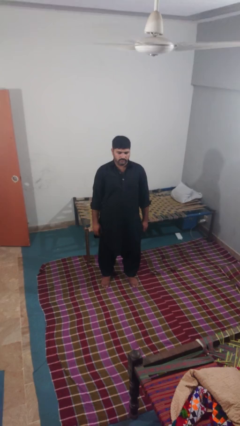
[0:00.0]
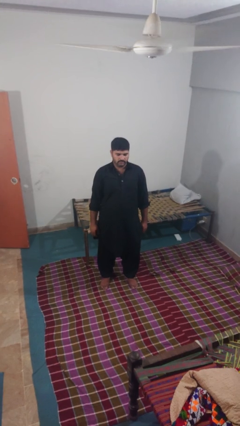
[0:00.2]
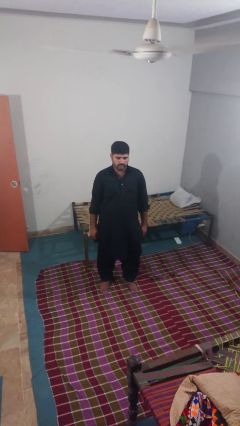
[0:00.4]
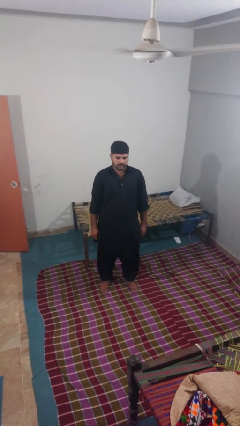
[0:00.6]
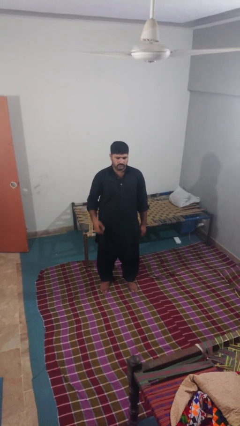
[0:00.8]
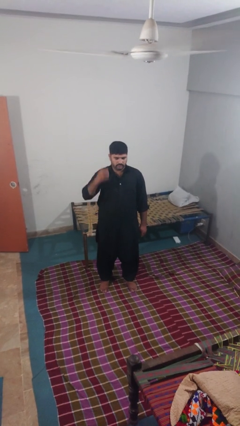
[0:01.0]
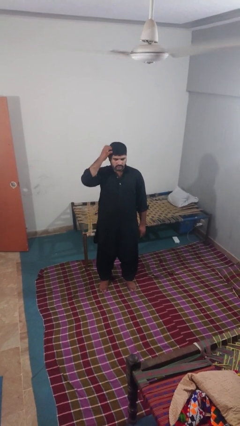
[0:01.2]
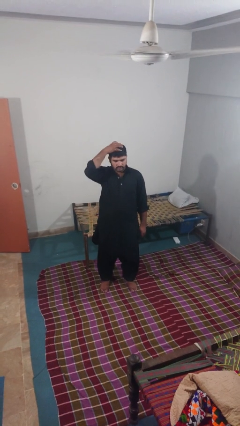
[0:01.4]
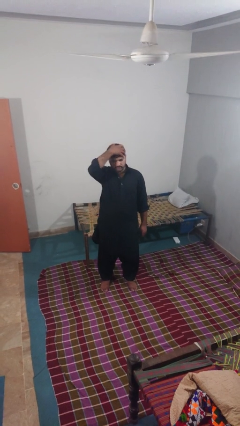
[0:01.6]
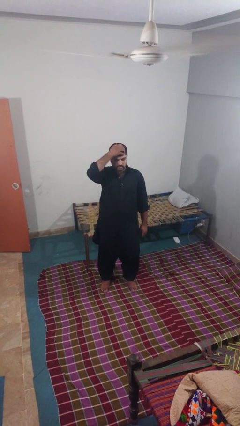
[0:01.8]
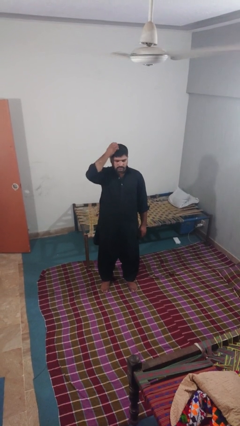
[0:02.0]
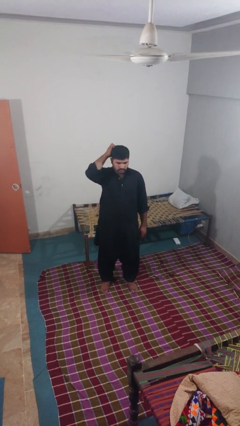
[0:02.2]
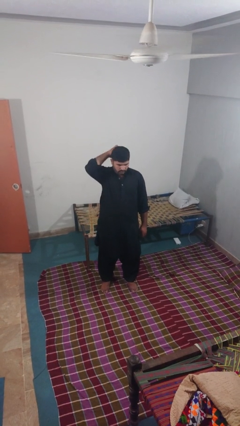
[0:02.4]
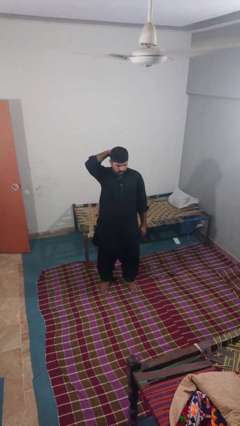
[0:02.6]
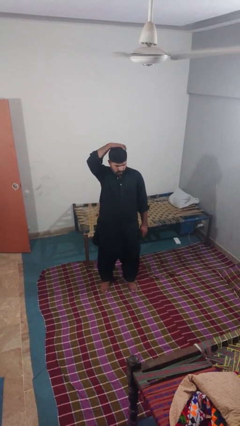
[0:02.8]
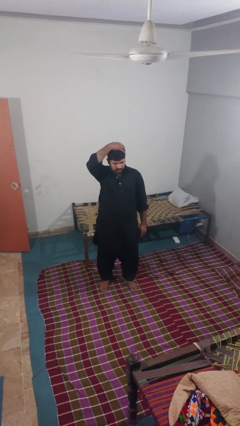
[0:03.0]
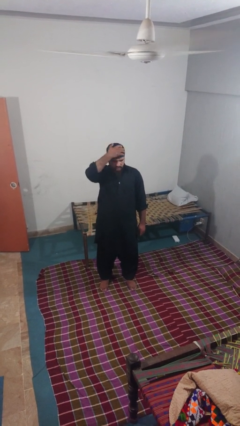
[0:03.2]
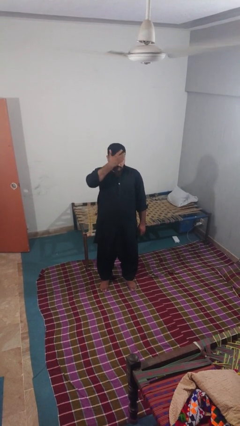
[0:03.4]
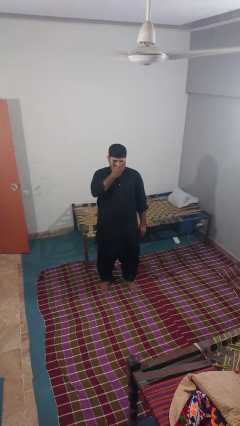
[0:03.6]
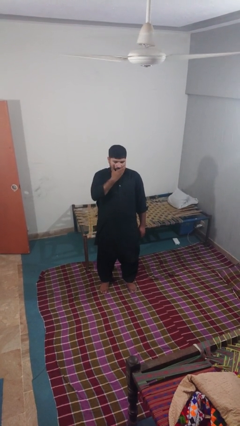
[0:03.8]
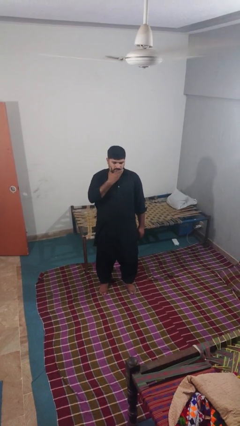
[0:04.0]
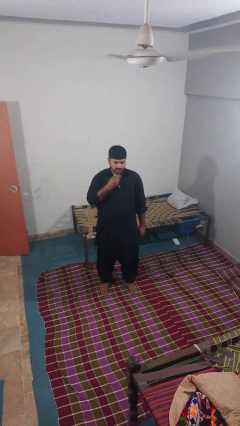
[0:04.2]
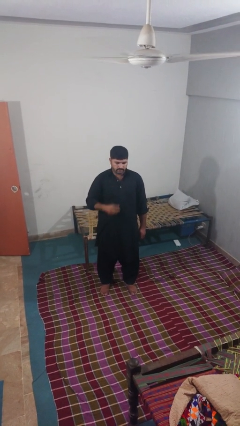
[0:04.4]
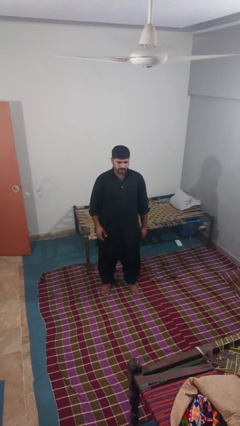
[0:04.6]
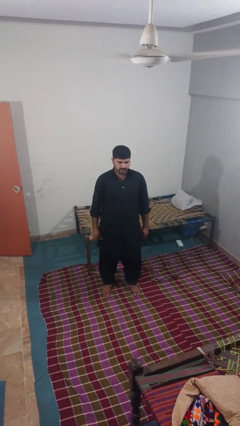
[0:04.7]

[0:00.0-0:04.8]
person scratches face

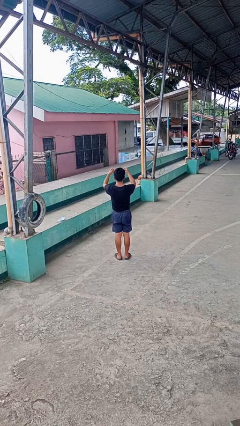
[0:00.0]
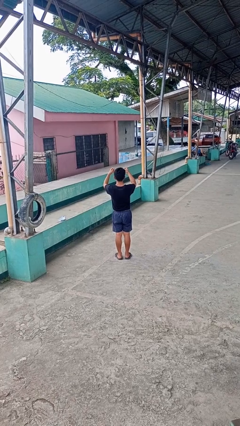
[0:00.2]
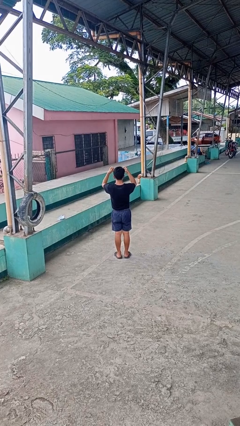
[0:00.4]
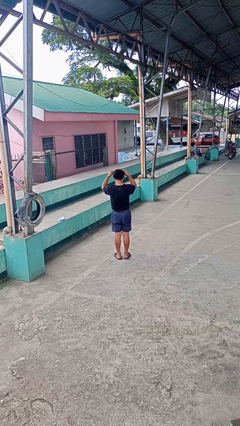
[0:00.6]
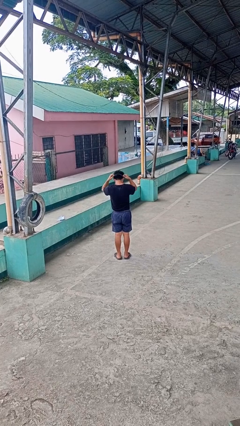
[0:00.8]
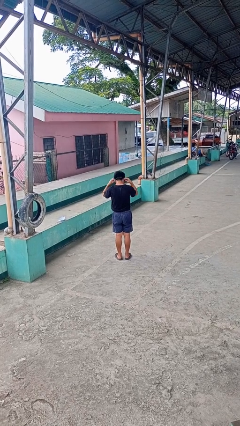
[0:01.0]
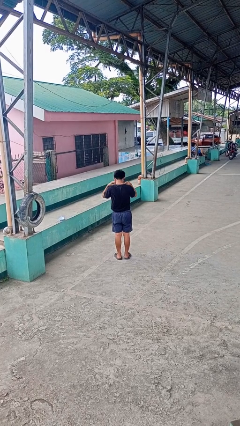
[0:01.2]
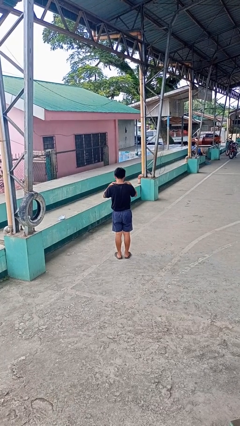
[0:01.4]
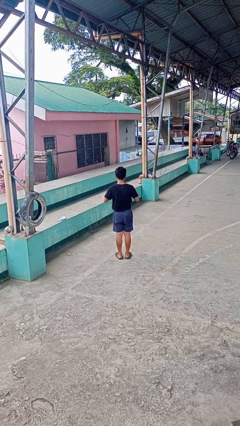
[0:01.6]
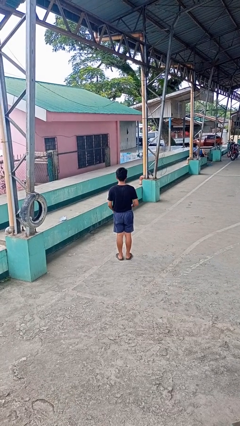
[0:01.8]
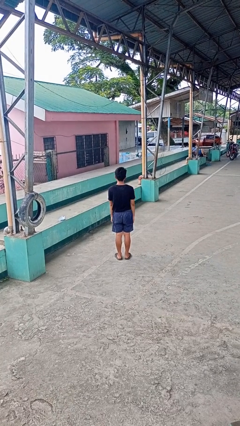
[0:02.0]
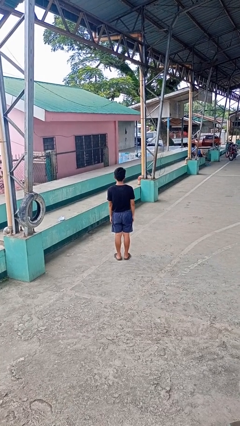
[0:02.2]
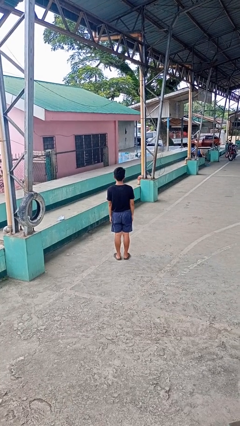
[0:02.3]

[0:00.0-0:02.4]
person puts on necklace

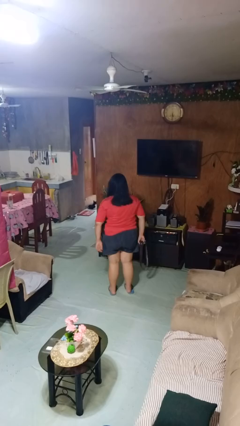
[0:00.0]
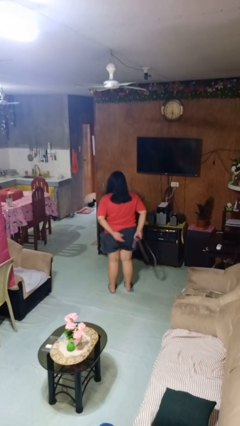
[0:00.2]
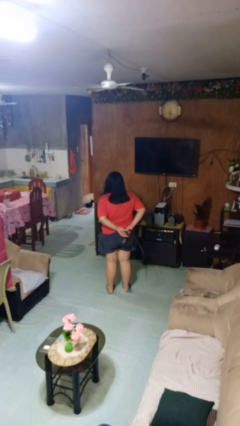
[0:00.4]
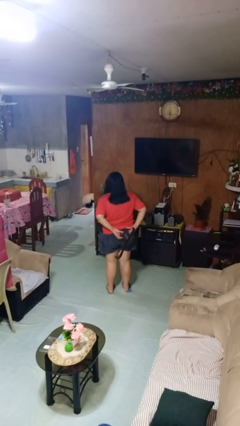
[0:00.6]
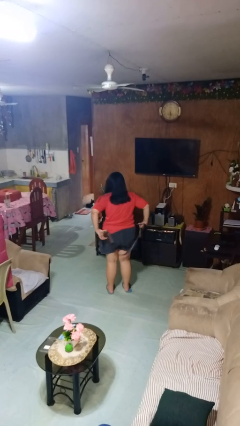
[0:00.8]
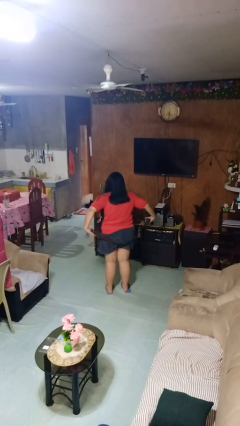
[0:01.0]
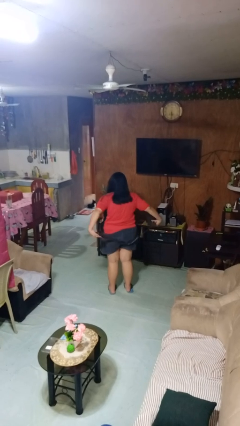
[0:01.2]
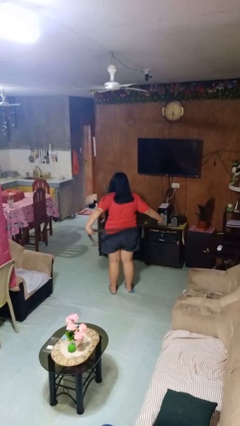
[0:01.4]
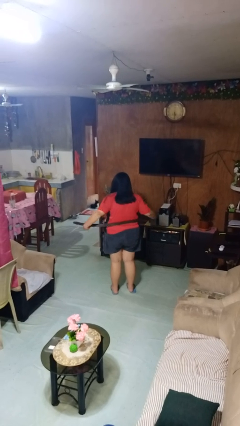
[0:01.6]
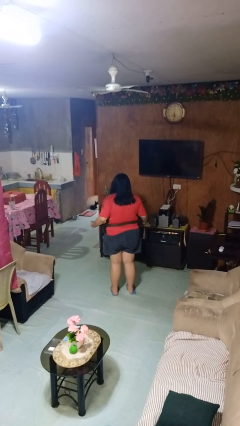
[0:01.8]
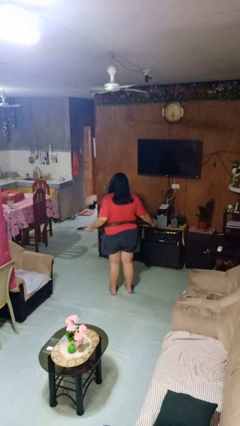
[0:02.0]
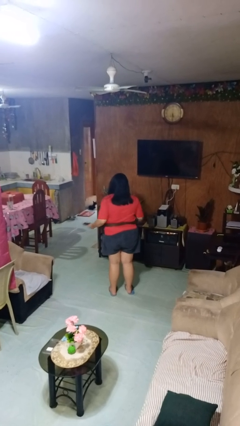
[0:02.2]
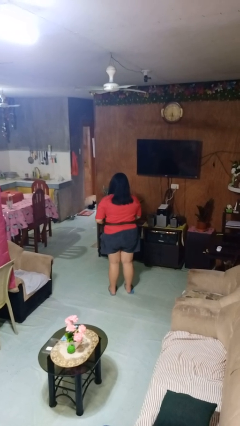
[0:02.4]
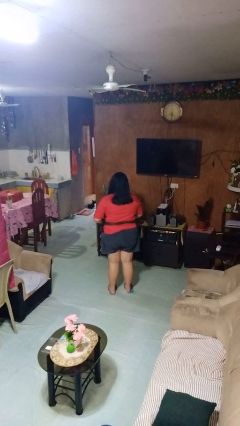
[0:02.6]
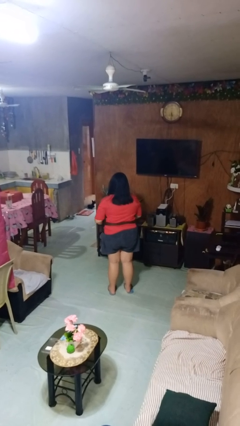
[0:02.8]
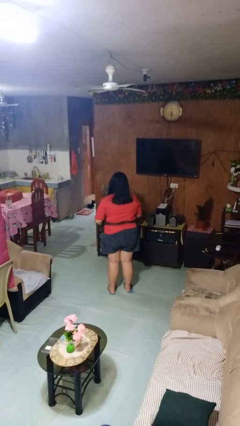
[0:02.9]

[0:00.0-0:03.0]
person puts on belt

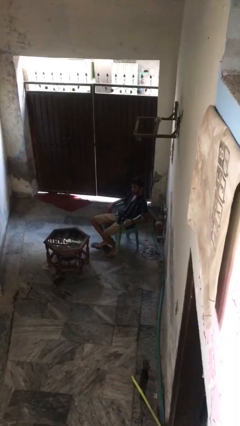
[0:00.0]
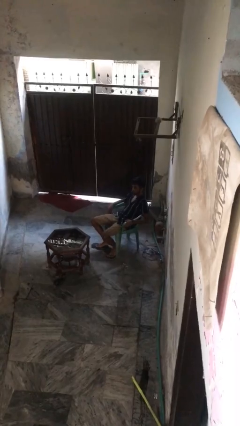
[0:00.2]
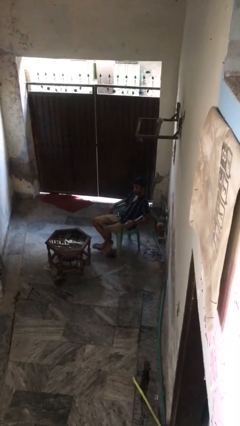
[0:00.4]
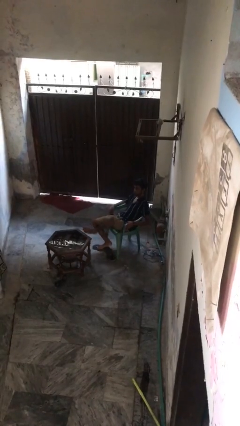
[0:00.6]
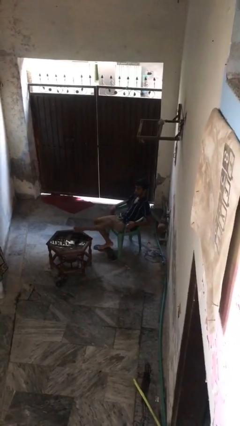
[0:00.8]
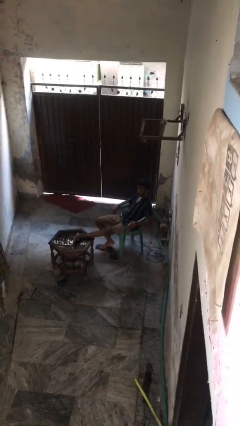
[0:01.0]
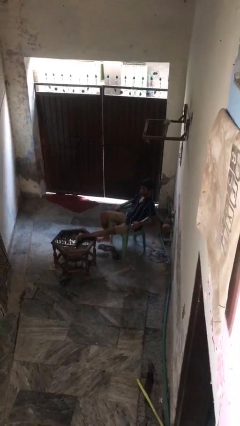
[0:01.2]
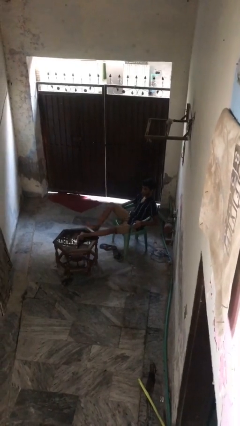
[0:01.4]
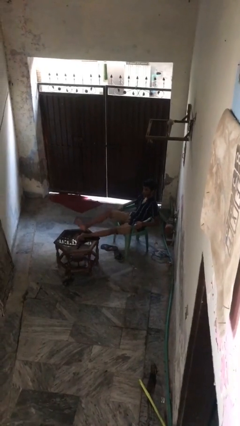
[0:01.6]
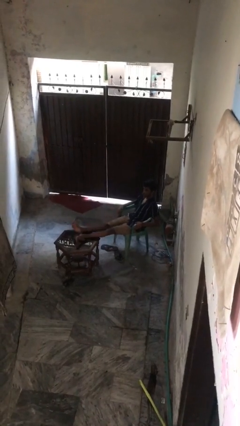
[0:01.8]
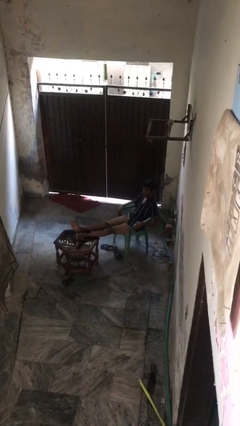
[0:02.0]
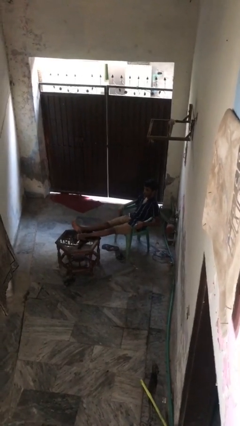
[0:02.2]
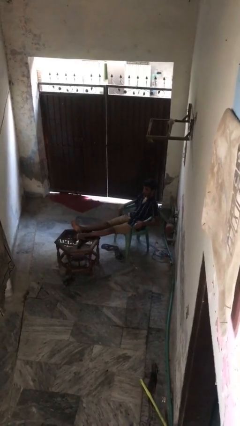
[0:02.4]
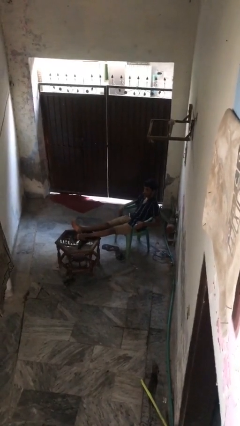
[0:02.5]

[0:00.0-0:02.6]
person puts feet up

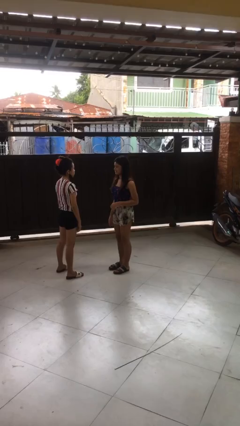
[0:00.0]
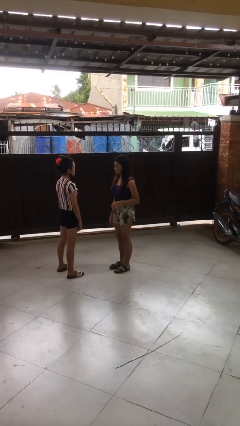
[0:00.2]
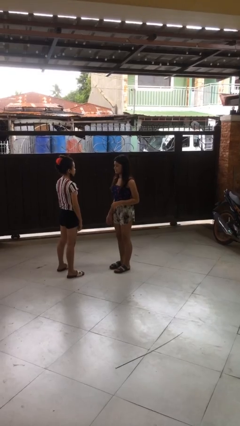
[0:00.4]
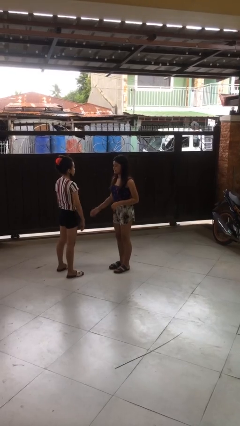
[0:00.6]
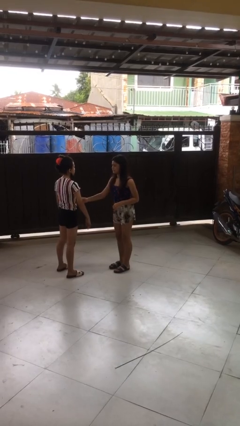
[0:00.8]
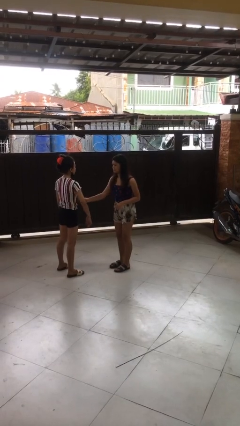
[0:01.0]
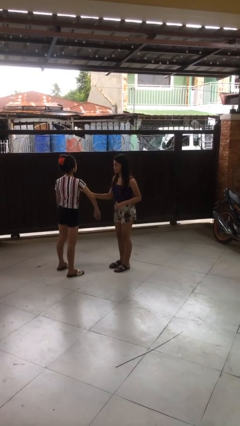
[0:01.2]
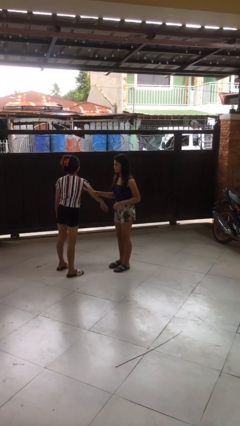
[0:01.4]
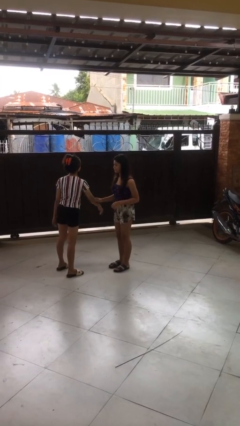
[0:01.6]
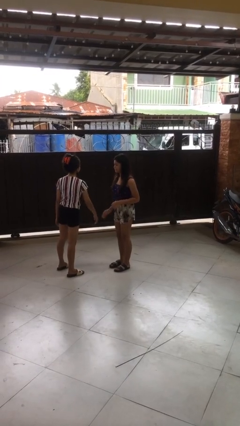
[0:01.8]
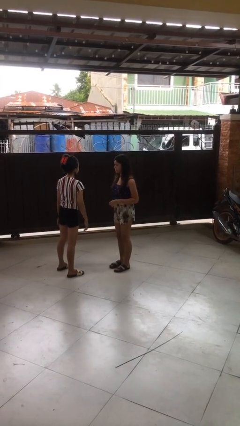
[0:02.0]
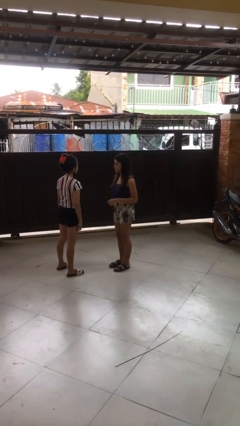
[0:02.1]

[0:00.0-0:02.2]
person grabs person by forearm

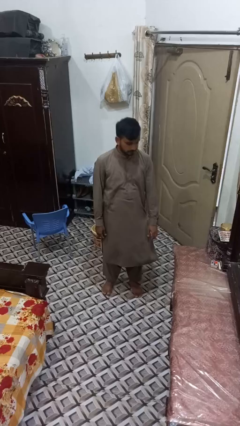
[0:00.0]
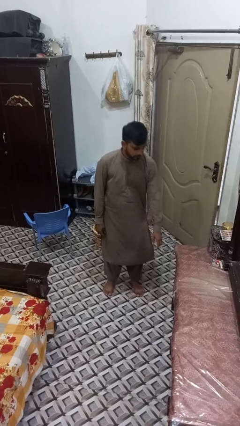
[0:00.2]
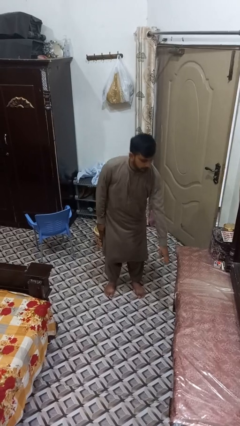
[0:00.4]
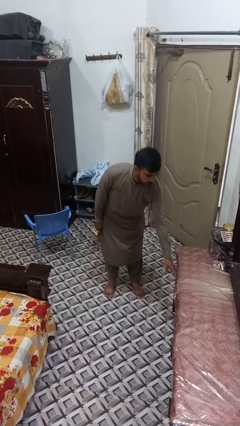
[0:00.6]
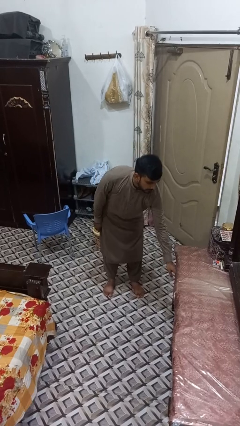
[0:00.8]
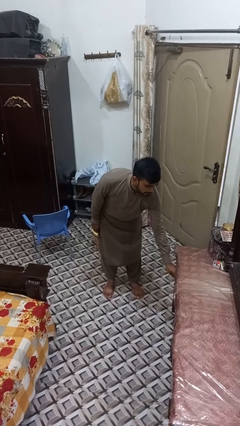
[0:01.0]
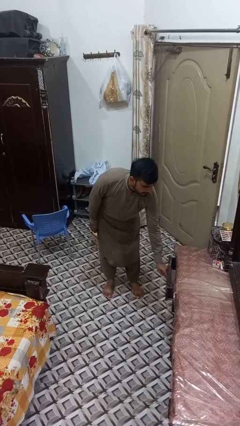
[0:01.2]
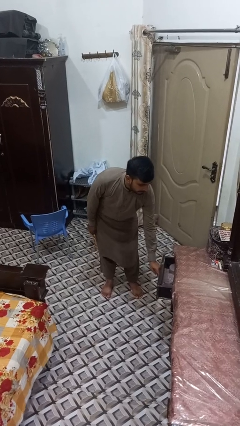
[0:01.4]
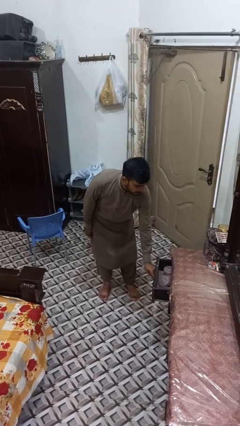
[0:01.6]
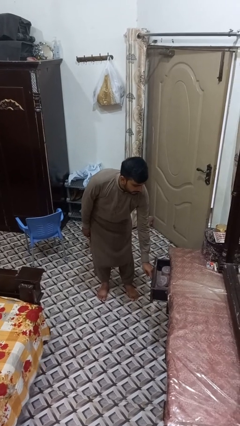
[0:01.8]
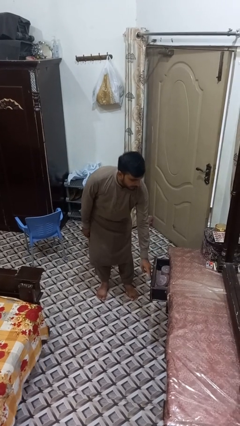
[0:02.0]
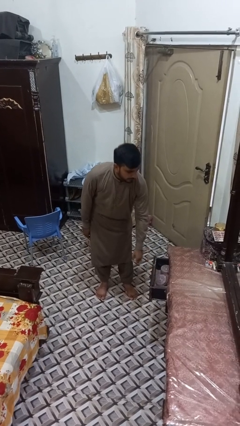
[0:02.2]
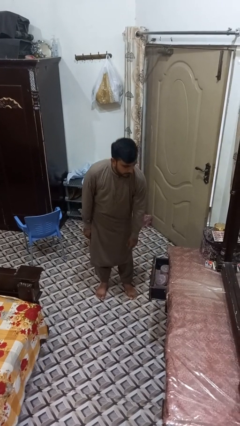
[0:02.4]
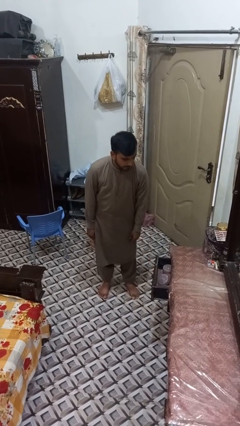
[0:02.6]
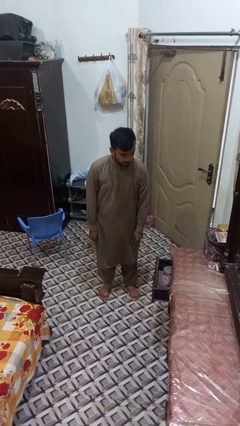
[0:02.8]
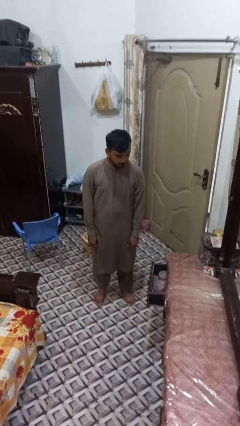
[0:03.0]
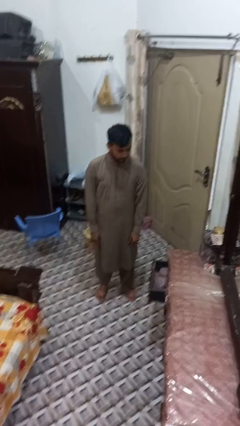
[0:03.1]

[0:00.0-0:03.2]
person opens dresser drawer
